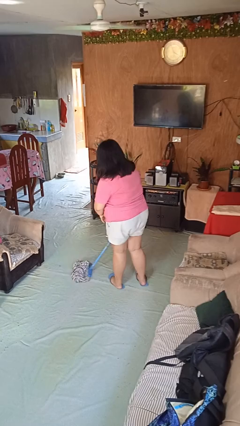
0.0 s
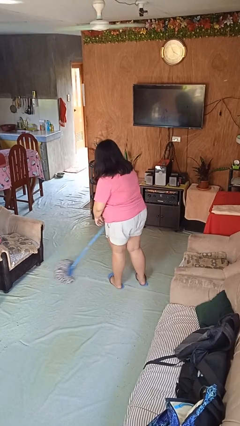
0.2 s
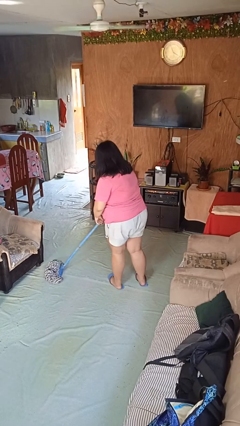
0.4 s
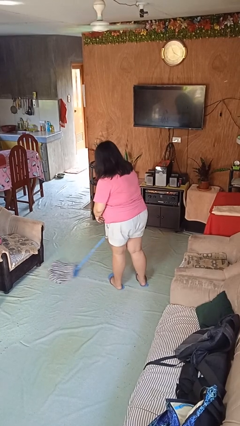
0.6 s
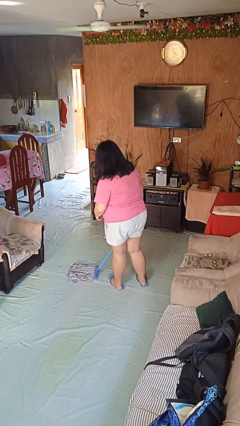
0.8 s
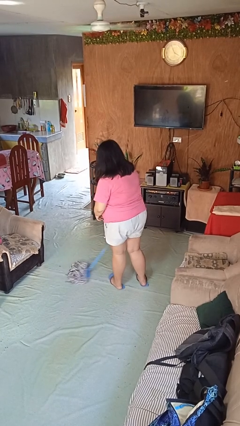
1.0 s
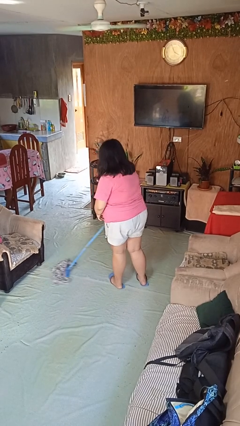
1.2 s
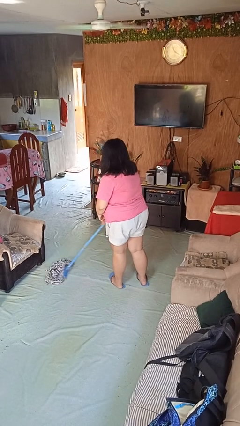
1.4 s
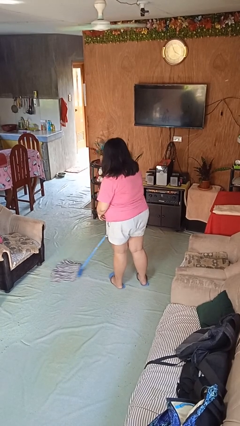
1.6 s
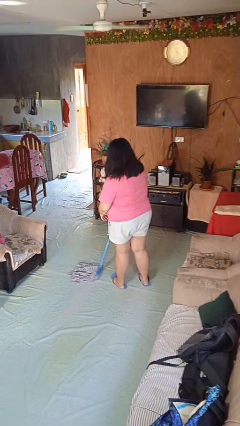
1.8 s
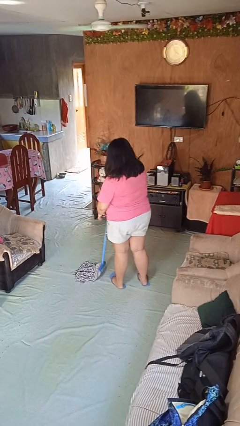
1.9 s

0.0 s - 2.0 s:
person mops

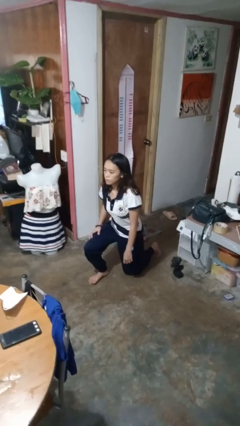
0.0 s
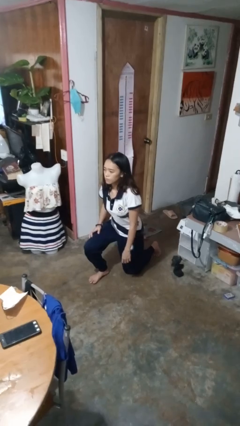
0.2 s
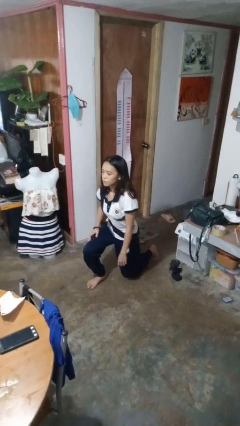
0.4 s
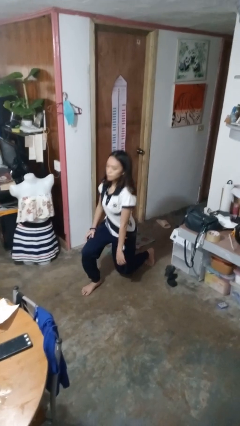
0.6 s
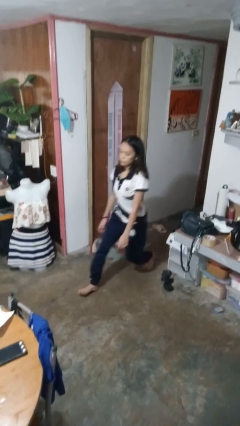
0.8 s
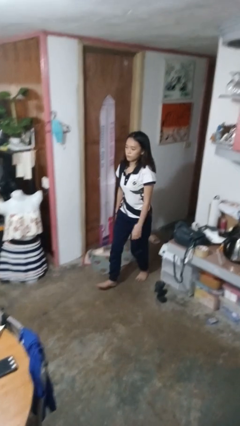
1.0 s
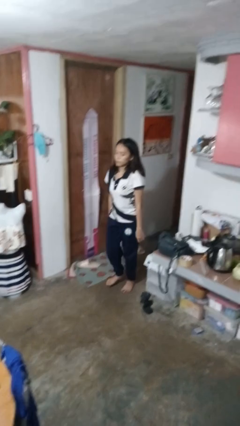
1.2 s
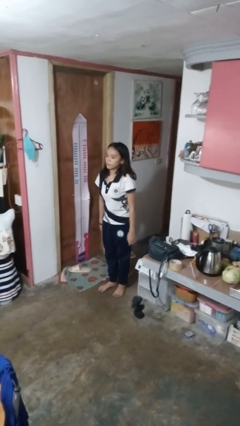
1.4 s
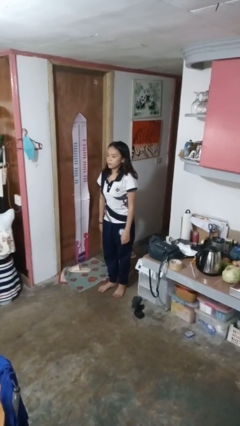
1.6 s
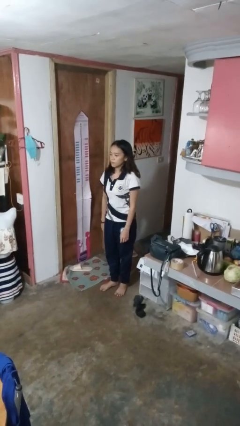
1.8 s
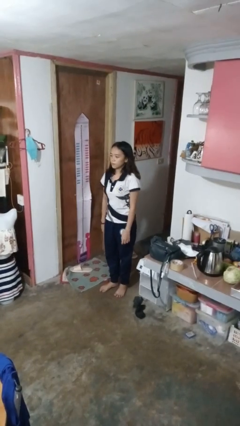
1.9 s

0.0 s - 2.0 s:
person stands up from floor

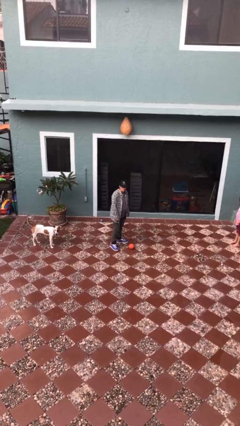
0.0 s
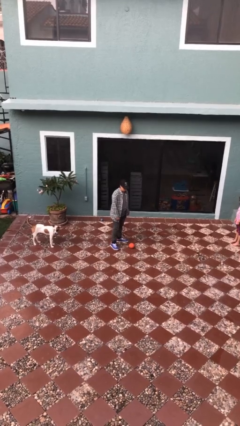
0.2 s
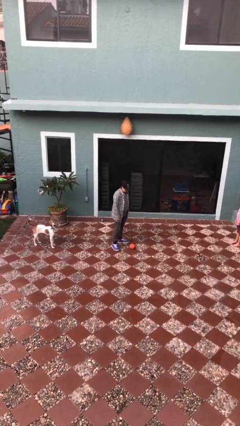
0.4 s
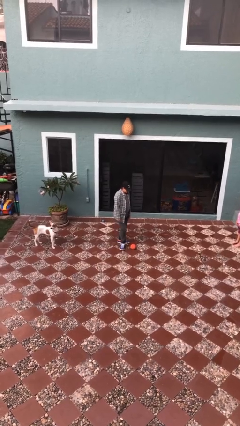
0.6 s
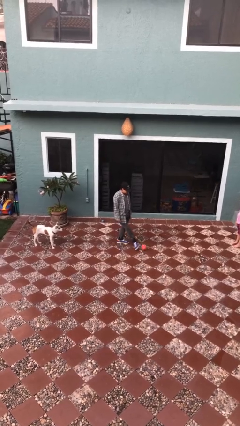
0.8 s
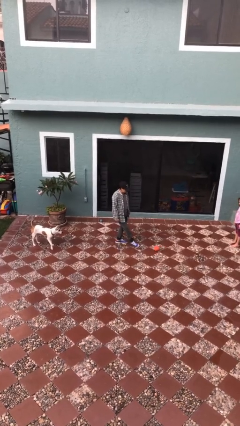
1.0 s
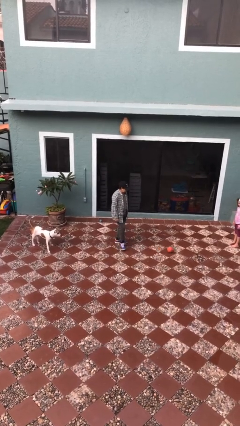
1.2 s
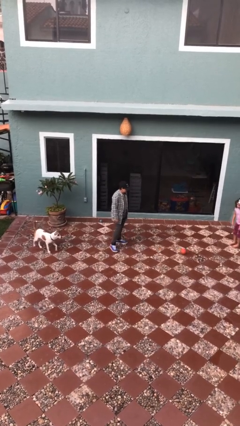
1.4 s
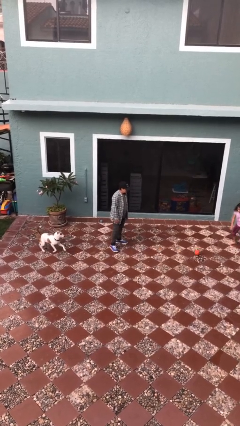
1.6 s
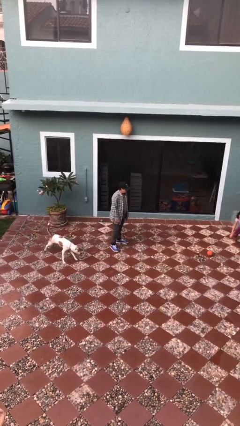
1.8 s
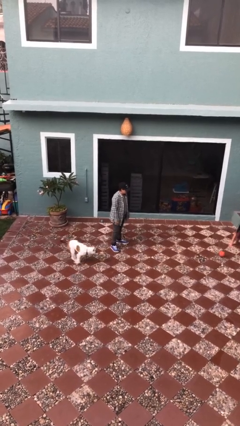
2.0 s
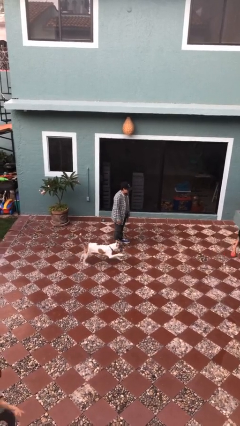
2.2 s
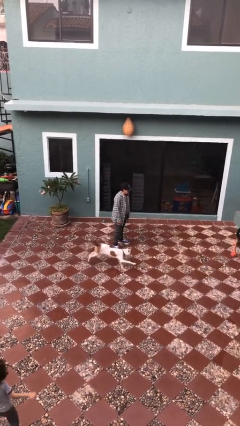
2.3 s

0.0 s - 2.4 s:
person kicks object to person

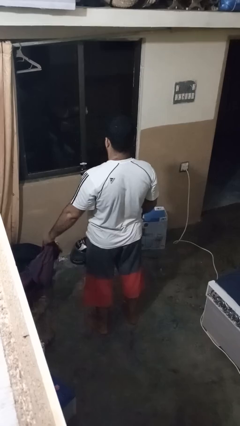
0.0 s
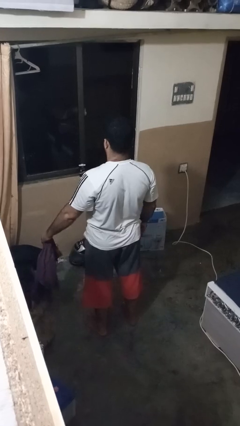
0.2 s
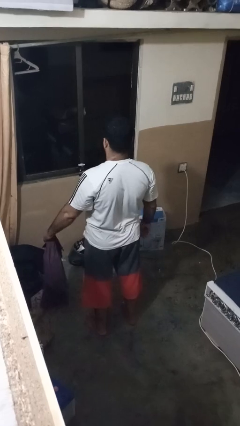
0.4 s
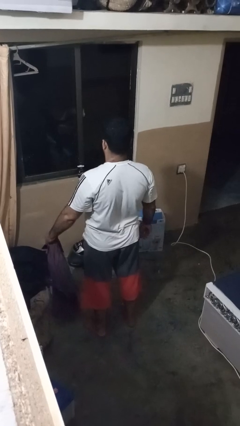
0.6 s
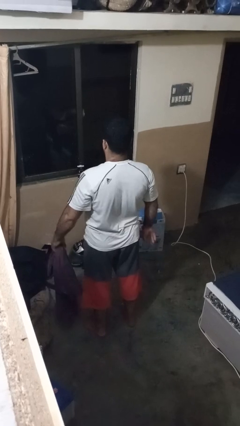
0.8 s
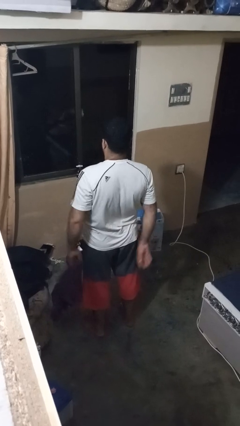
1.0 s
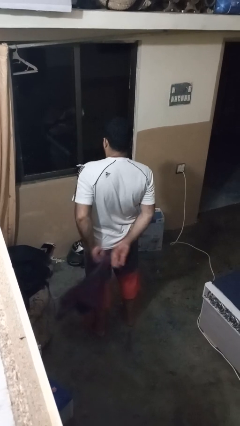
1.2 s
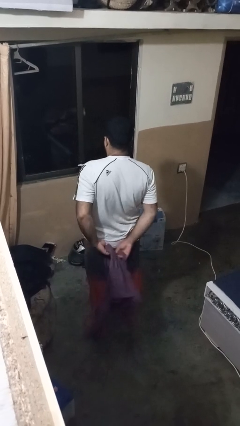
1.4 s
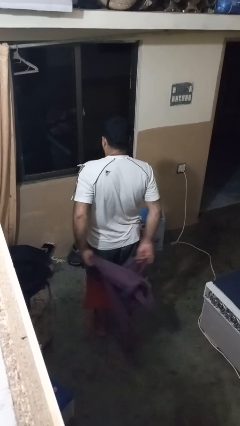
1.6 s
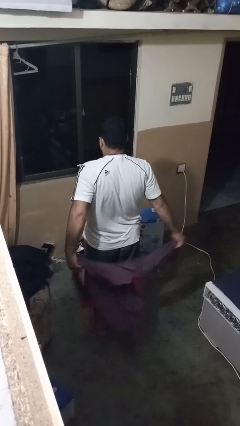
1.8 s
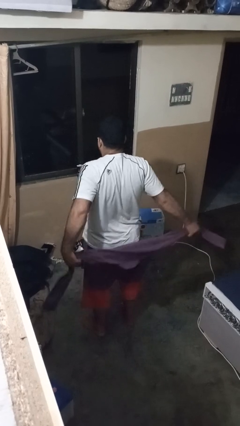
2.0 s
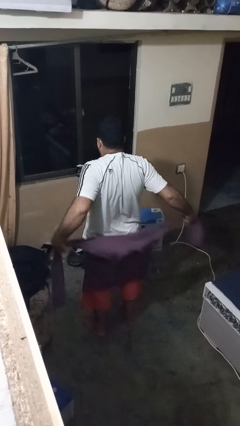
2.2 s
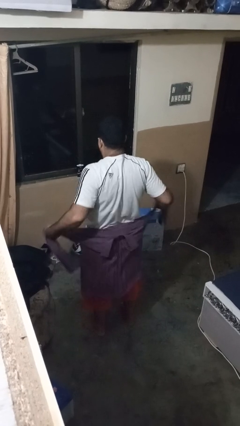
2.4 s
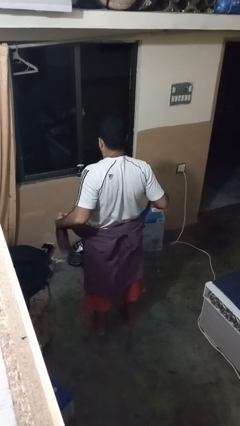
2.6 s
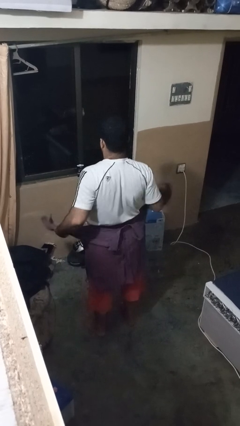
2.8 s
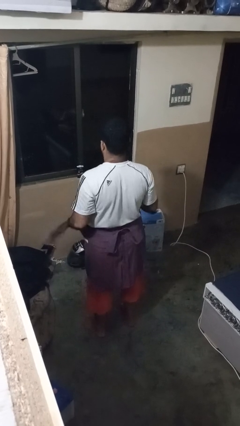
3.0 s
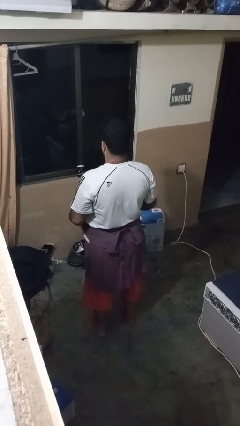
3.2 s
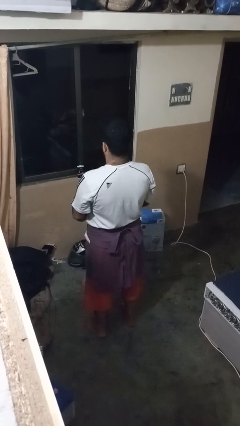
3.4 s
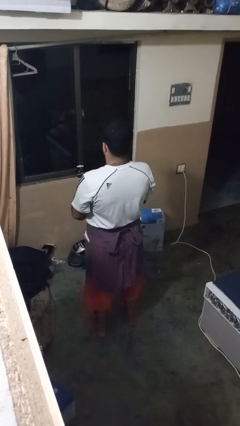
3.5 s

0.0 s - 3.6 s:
person ties jacket around waist

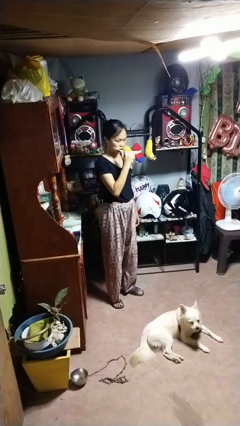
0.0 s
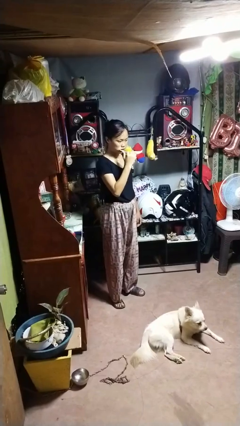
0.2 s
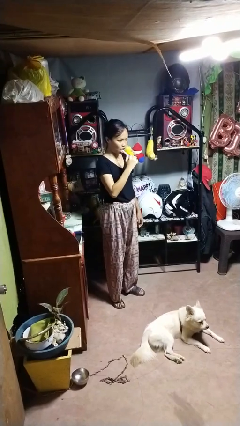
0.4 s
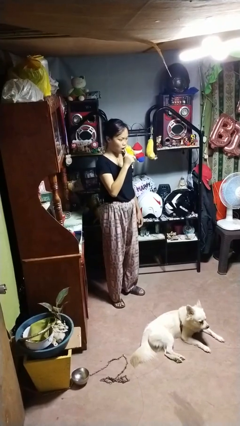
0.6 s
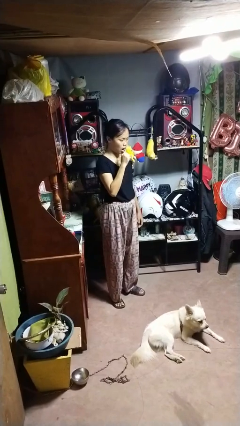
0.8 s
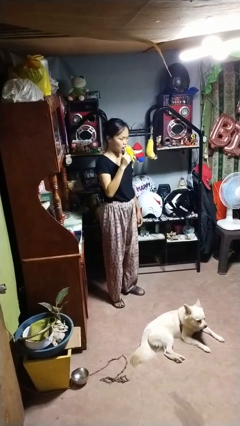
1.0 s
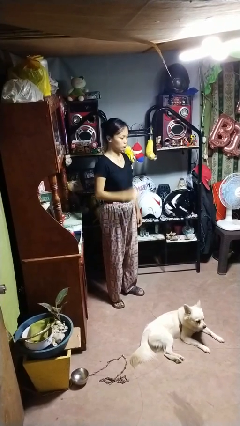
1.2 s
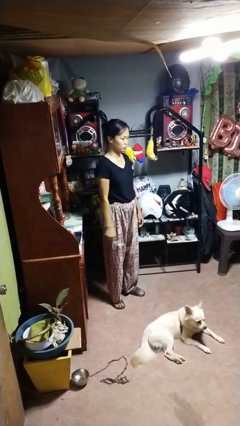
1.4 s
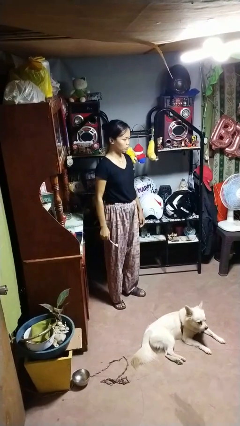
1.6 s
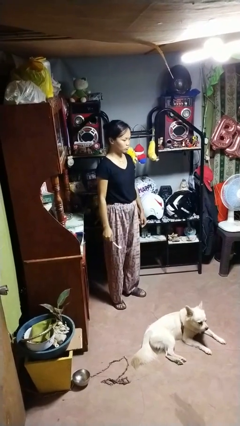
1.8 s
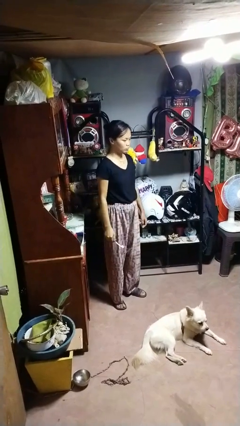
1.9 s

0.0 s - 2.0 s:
person brushes teeth
